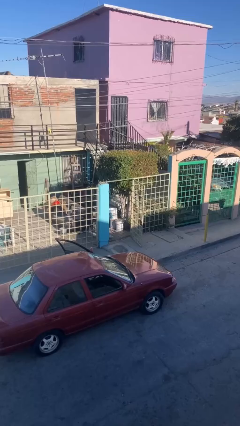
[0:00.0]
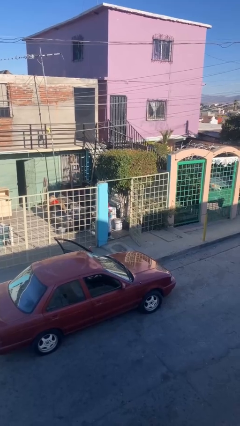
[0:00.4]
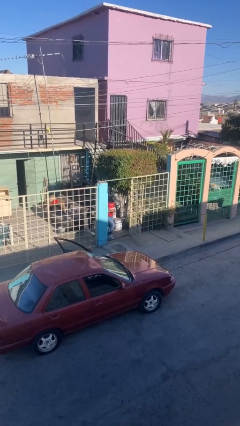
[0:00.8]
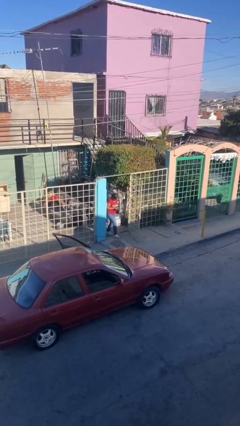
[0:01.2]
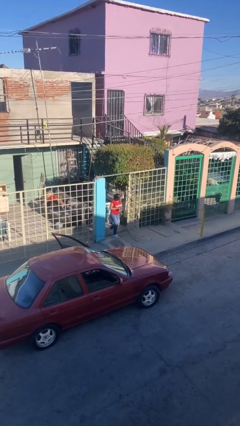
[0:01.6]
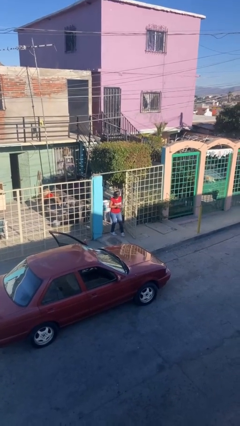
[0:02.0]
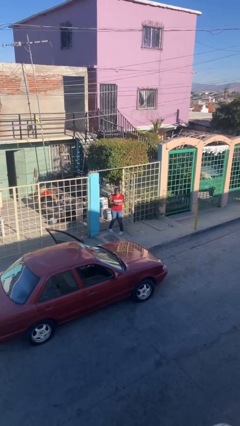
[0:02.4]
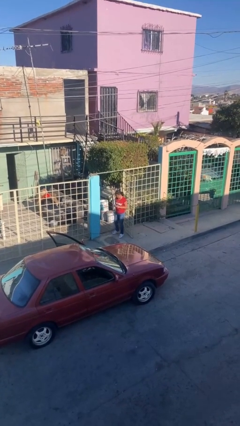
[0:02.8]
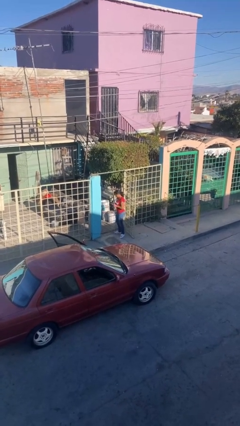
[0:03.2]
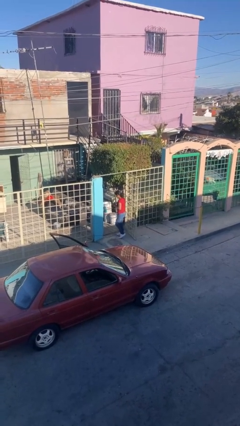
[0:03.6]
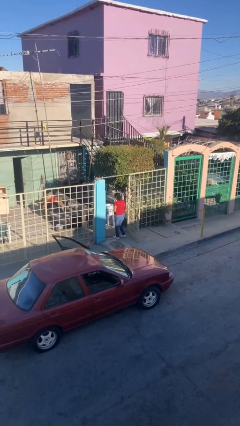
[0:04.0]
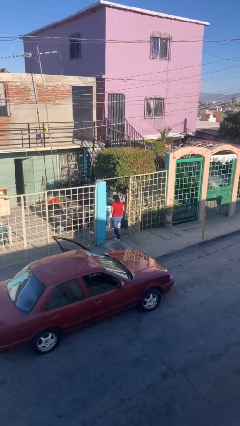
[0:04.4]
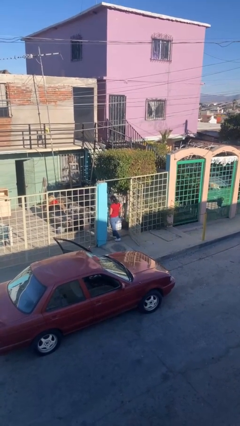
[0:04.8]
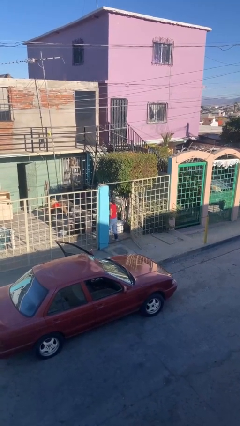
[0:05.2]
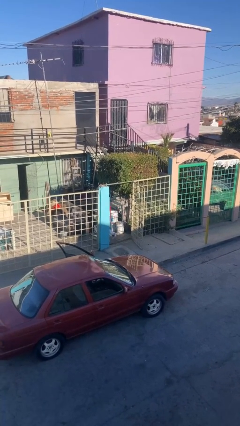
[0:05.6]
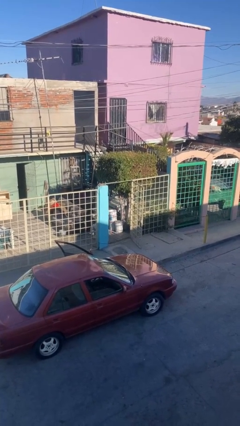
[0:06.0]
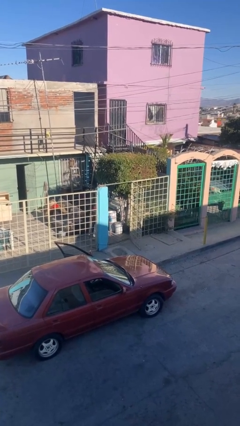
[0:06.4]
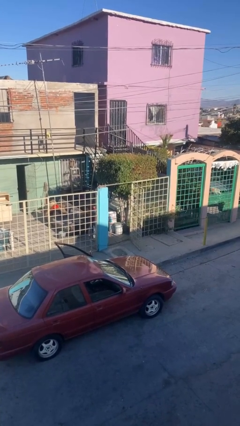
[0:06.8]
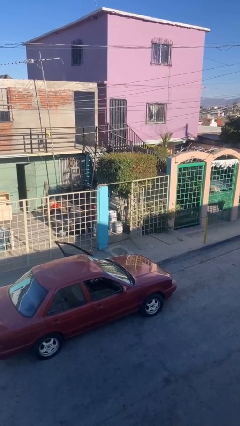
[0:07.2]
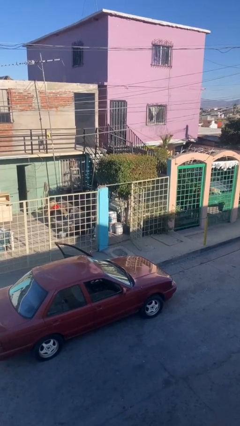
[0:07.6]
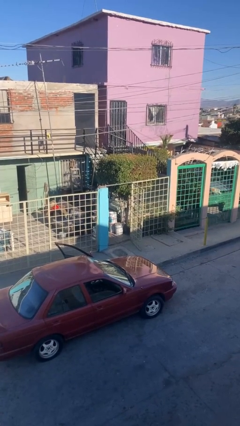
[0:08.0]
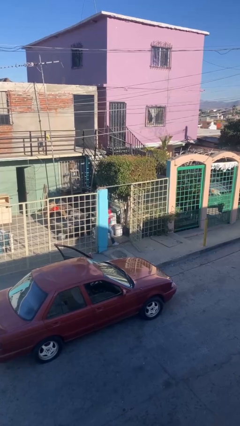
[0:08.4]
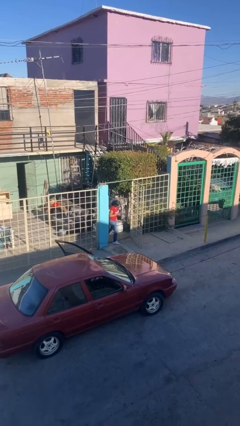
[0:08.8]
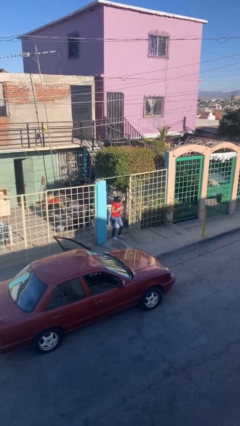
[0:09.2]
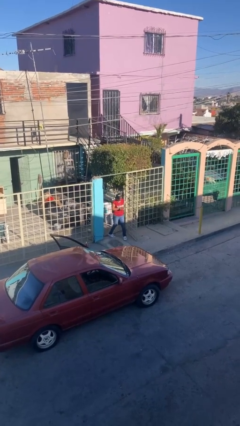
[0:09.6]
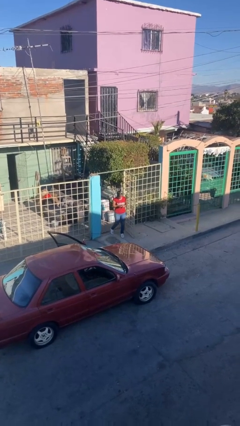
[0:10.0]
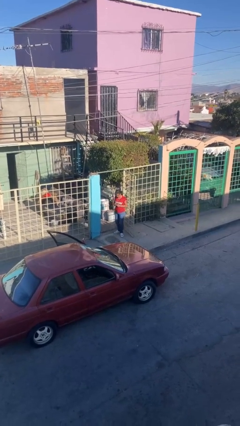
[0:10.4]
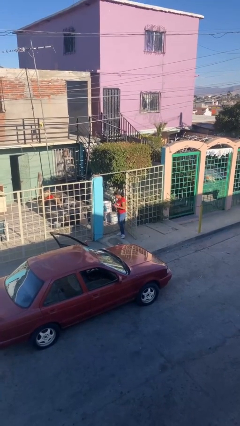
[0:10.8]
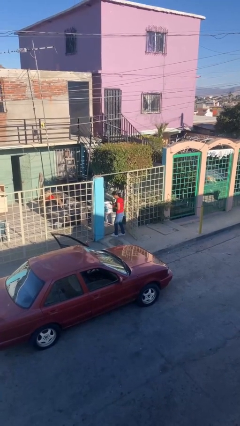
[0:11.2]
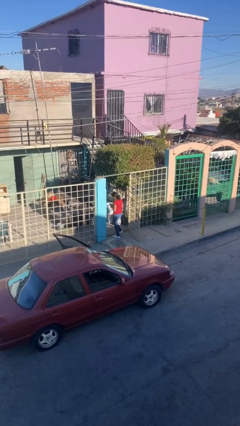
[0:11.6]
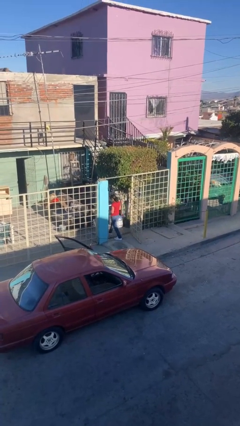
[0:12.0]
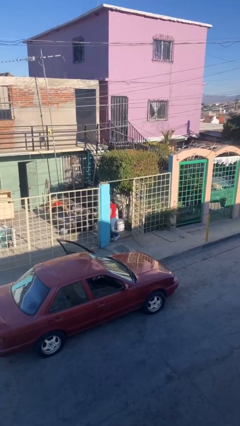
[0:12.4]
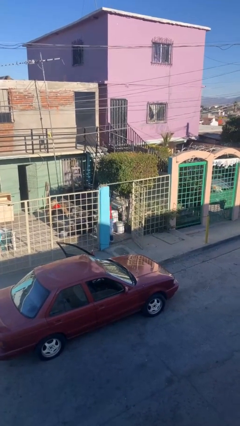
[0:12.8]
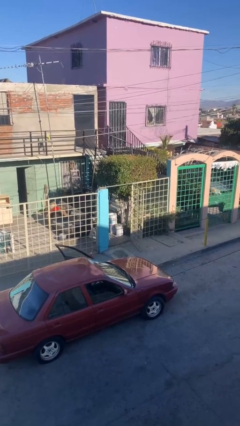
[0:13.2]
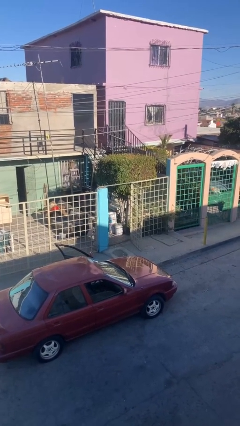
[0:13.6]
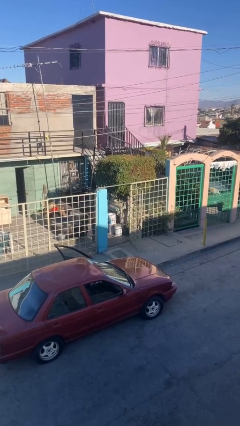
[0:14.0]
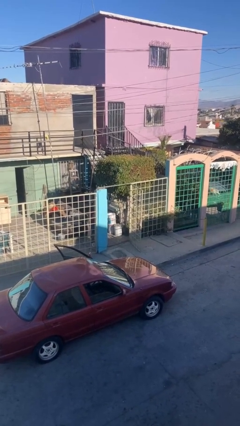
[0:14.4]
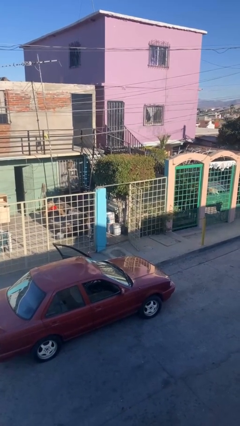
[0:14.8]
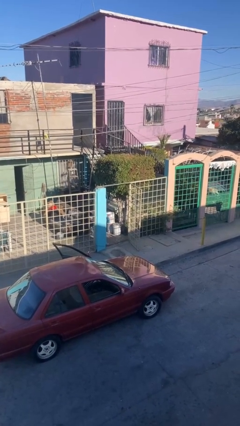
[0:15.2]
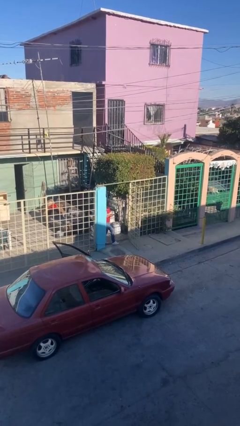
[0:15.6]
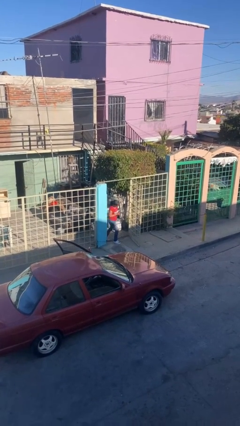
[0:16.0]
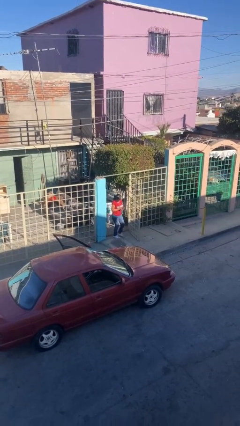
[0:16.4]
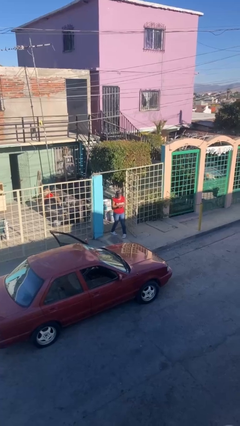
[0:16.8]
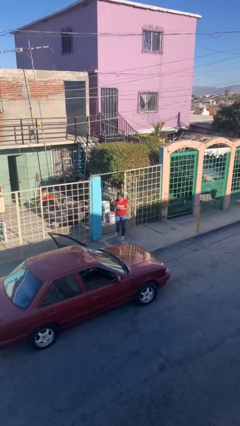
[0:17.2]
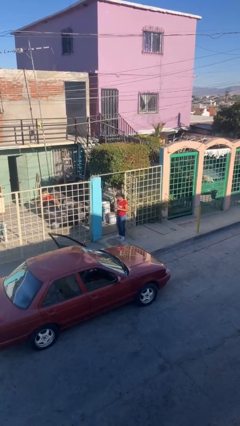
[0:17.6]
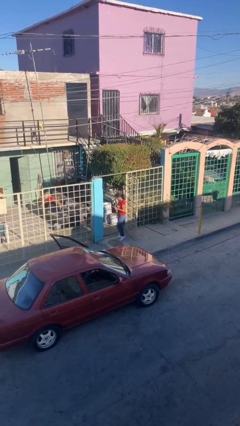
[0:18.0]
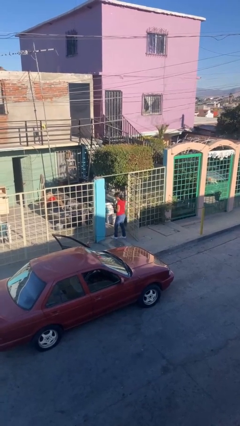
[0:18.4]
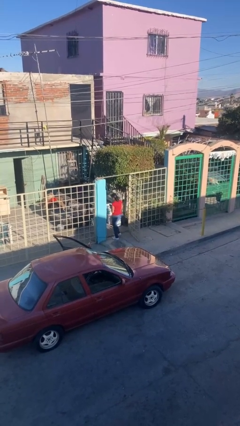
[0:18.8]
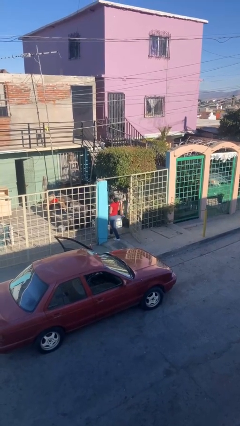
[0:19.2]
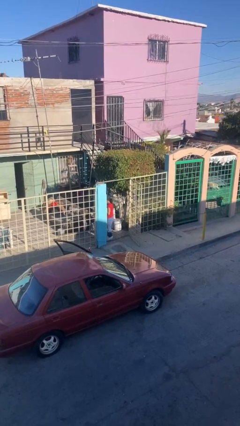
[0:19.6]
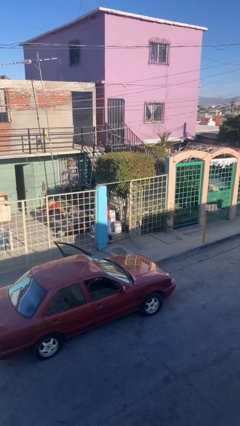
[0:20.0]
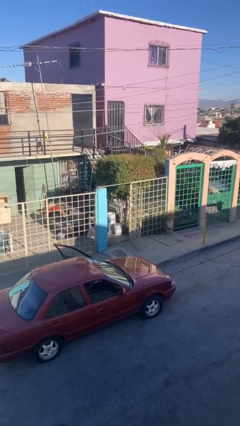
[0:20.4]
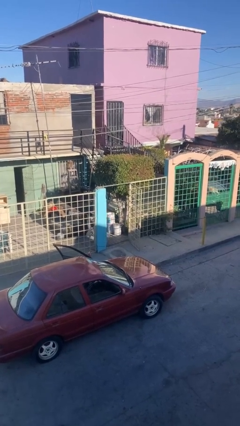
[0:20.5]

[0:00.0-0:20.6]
person texts on phone

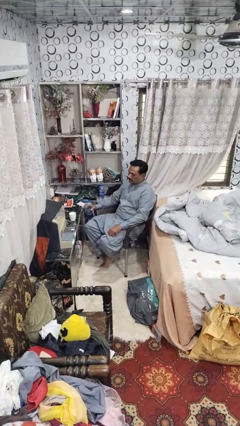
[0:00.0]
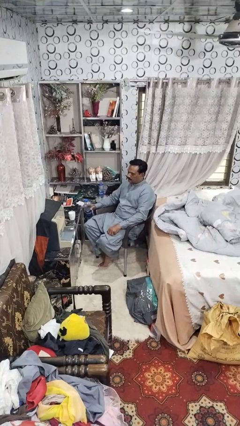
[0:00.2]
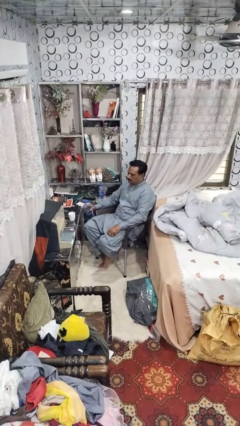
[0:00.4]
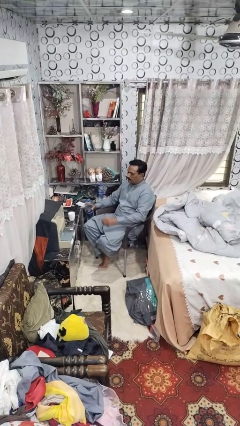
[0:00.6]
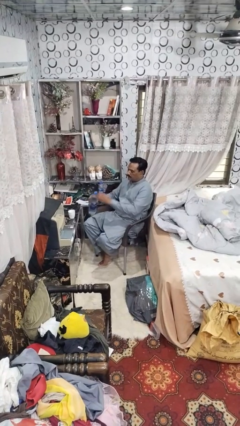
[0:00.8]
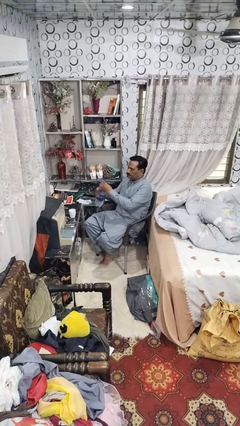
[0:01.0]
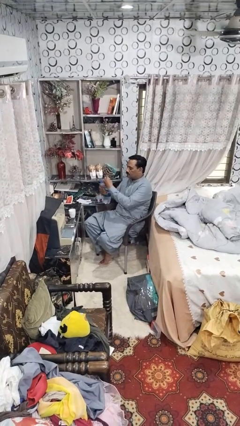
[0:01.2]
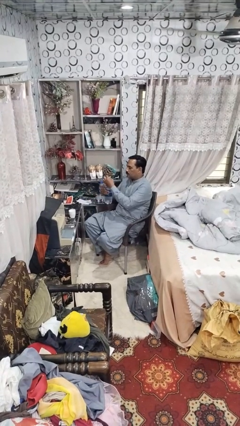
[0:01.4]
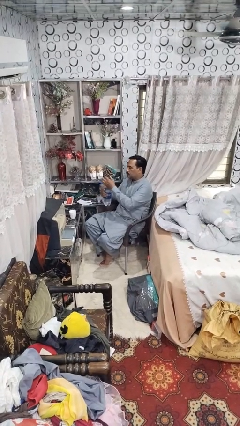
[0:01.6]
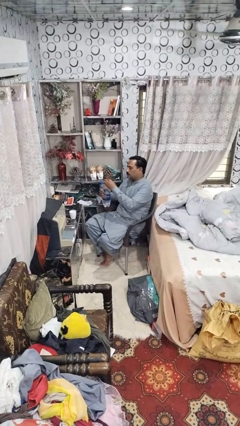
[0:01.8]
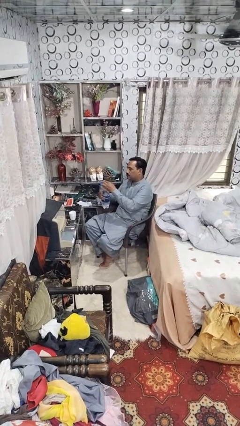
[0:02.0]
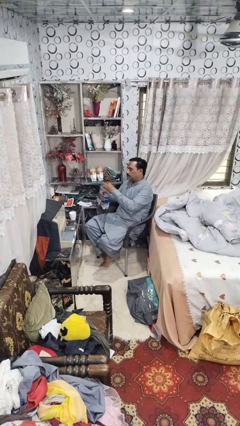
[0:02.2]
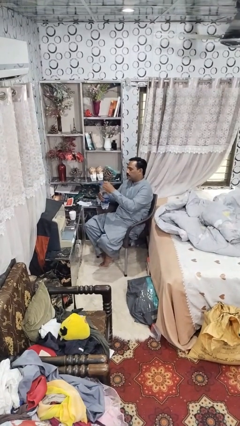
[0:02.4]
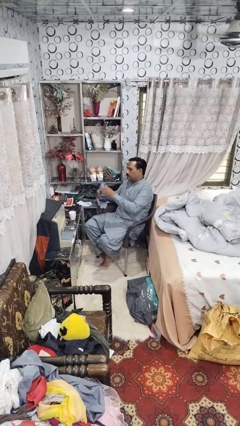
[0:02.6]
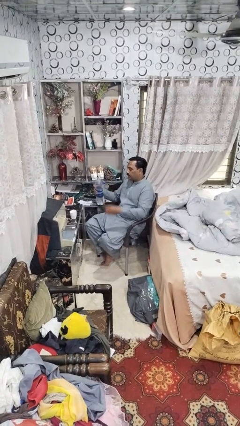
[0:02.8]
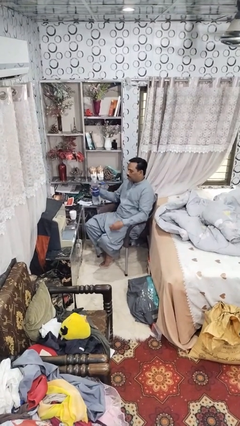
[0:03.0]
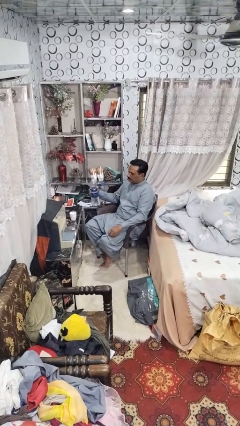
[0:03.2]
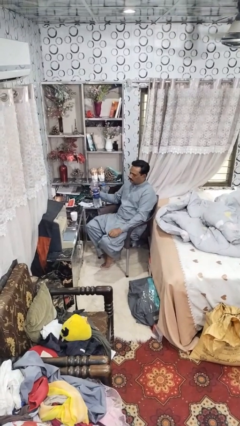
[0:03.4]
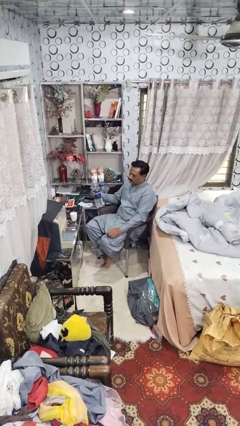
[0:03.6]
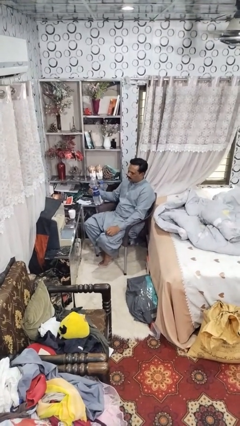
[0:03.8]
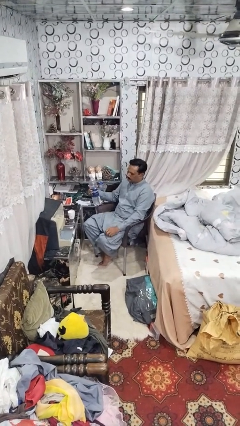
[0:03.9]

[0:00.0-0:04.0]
person unscrews lid from bottle

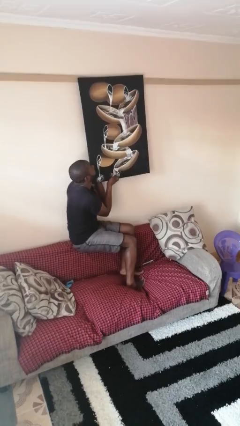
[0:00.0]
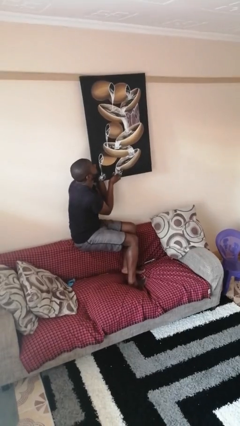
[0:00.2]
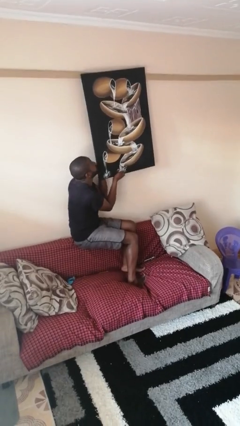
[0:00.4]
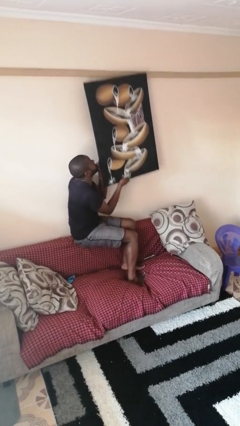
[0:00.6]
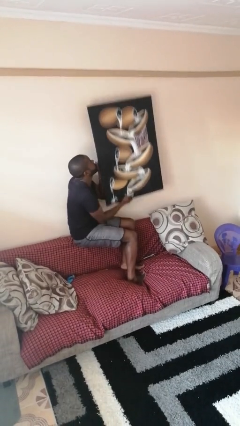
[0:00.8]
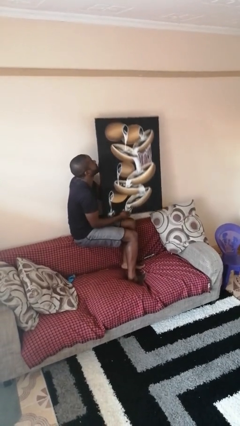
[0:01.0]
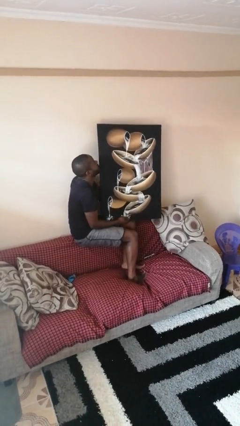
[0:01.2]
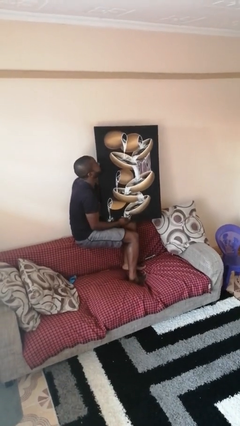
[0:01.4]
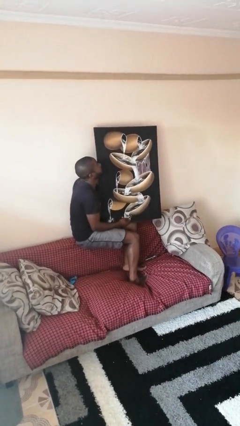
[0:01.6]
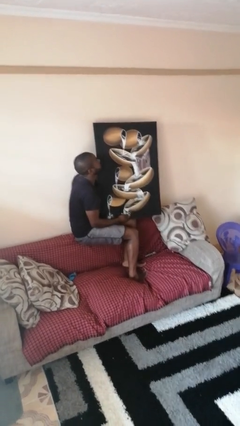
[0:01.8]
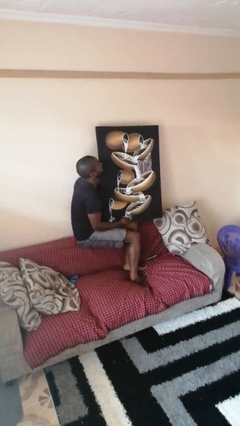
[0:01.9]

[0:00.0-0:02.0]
person takes down picture frame

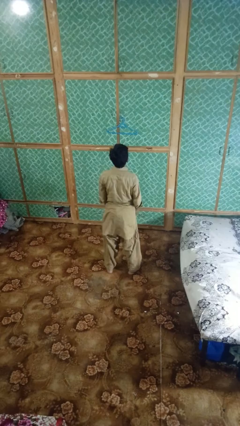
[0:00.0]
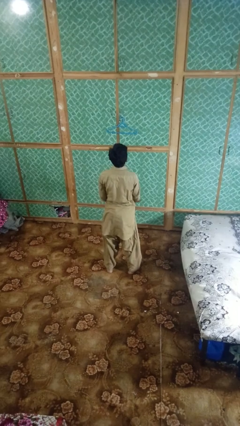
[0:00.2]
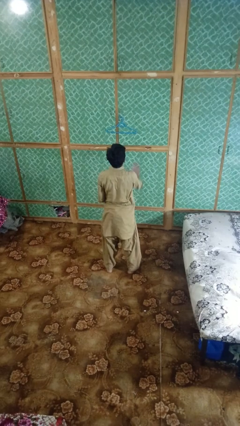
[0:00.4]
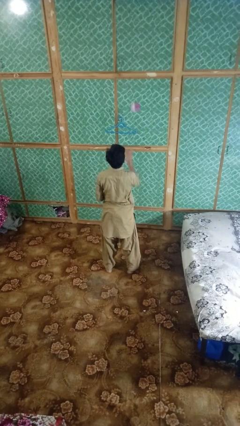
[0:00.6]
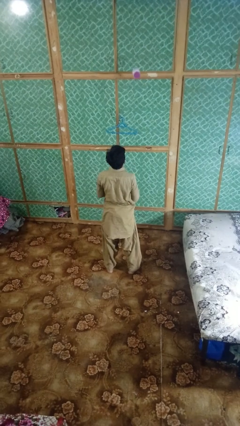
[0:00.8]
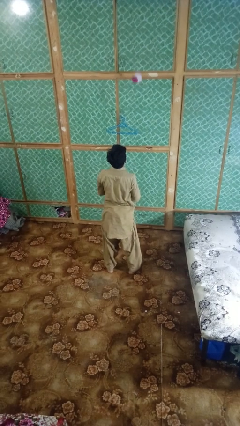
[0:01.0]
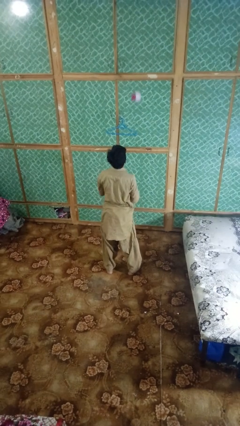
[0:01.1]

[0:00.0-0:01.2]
person drops object

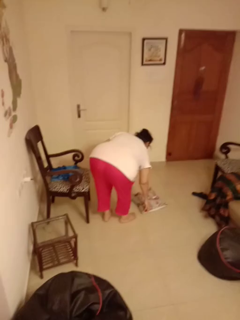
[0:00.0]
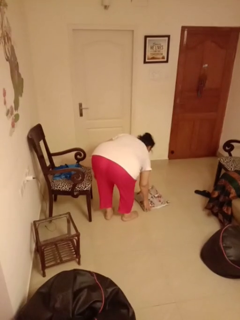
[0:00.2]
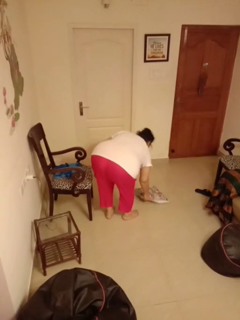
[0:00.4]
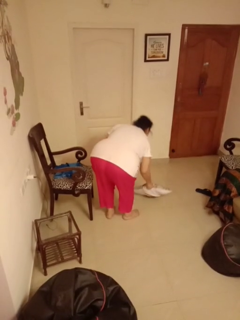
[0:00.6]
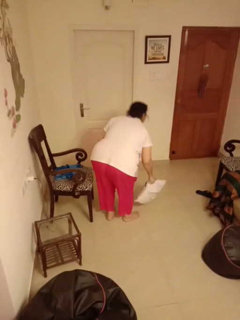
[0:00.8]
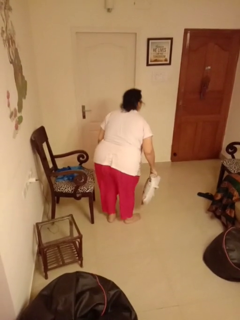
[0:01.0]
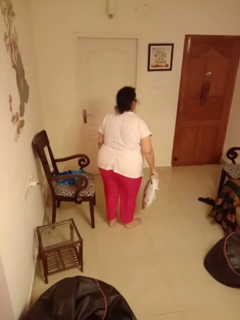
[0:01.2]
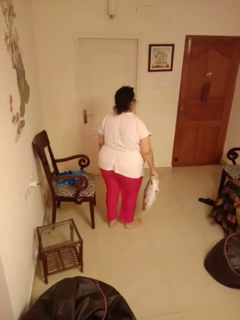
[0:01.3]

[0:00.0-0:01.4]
person picks up object from floor
